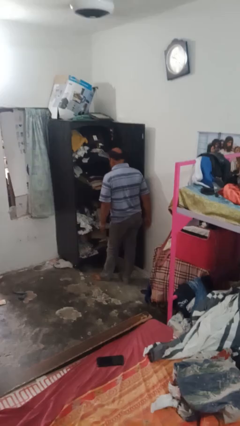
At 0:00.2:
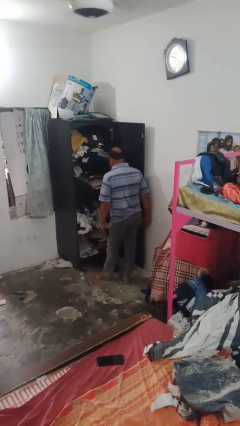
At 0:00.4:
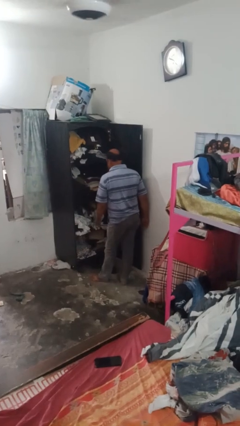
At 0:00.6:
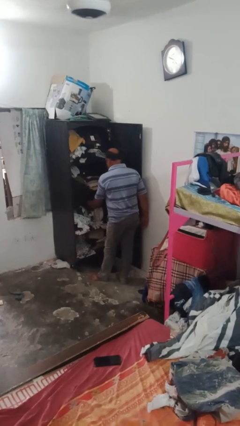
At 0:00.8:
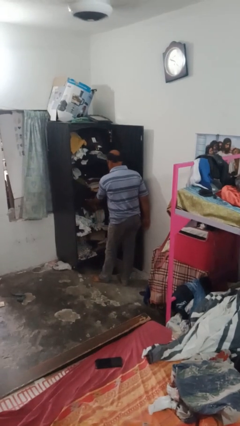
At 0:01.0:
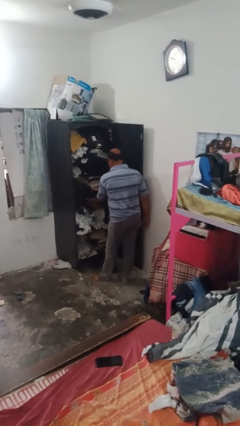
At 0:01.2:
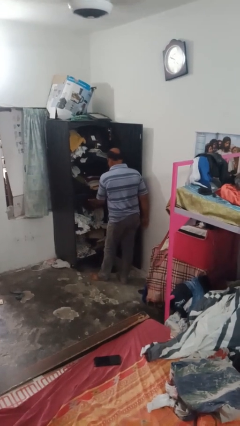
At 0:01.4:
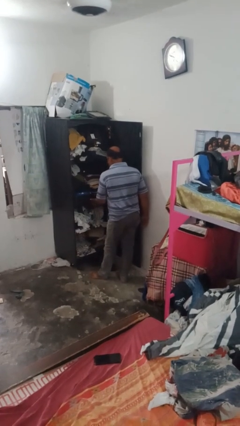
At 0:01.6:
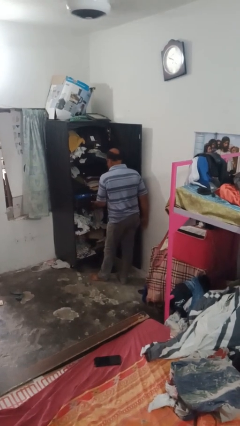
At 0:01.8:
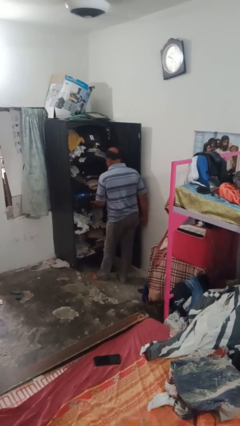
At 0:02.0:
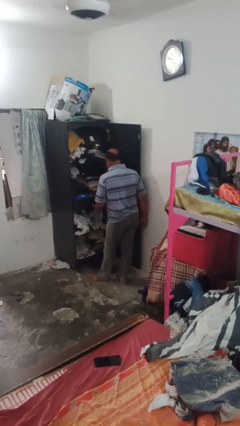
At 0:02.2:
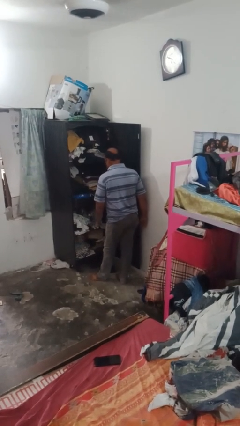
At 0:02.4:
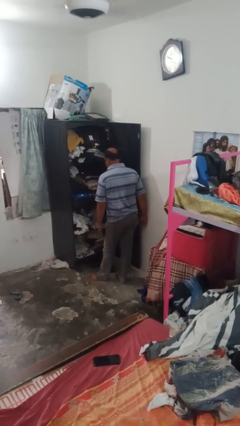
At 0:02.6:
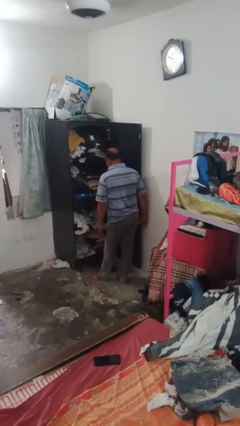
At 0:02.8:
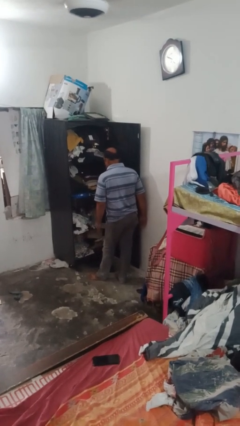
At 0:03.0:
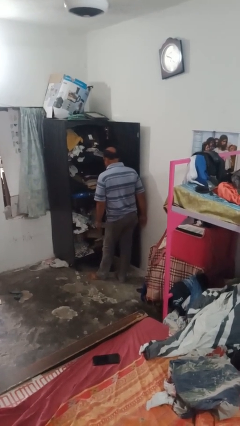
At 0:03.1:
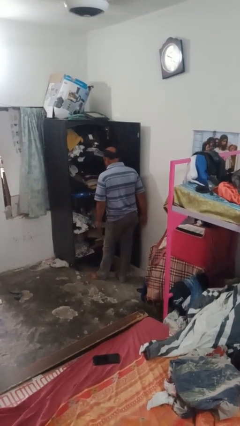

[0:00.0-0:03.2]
person opens dresser drawer

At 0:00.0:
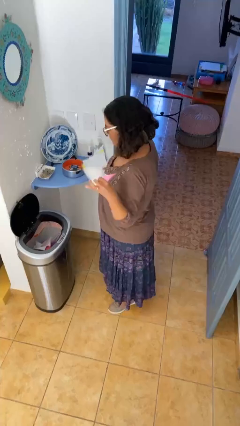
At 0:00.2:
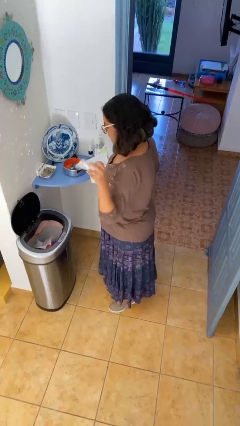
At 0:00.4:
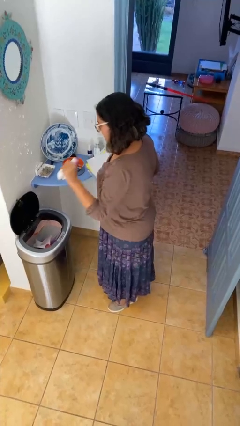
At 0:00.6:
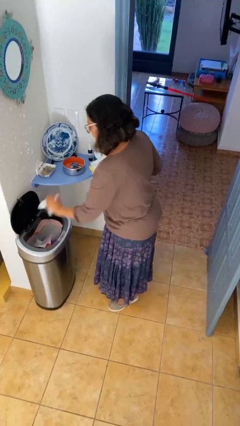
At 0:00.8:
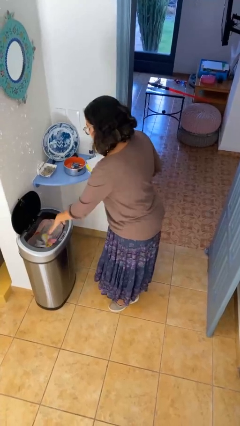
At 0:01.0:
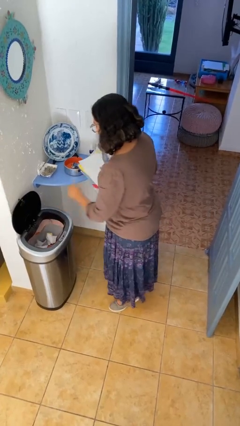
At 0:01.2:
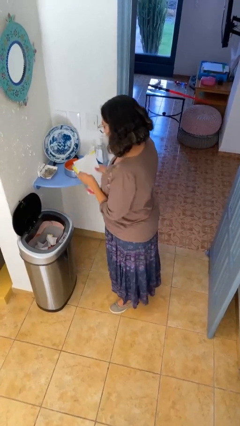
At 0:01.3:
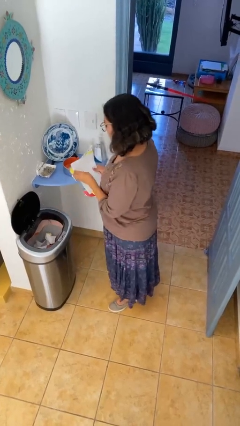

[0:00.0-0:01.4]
person discards trash

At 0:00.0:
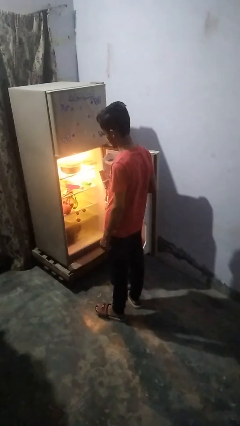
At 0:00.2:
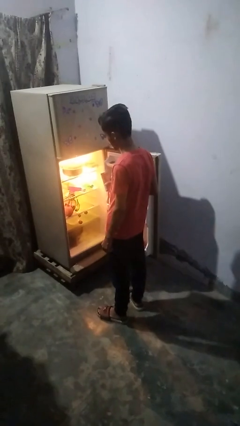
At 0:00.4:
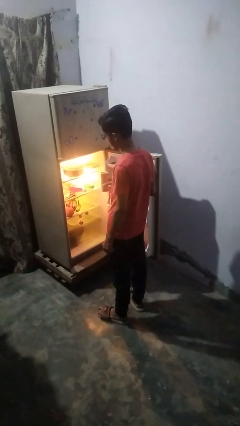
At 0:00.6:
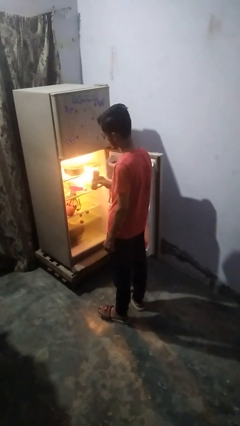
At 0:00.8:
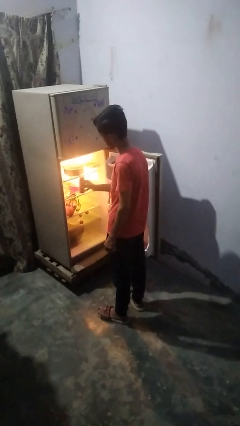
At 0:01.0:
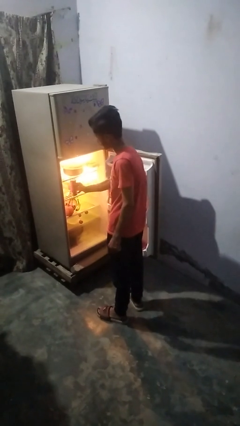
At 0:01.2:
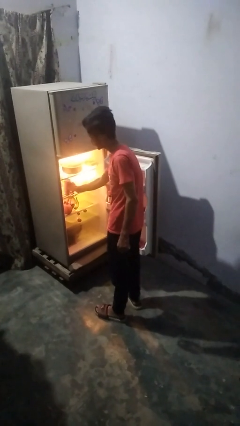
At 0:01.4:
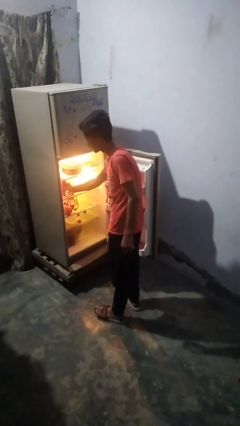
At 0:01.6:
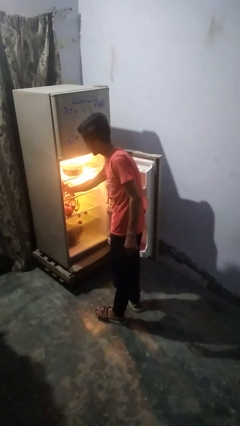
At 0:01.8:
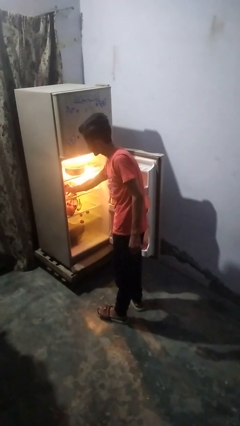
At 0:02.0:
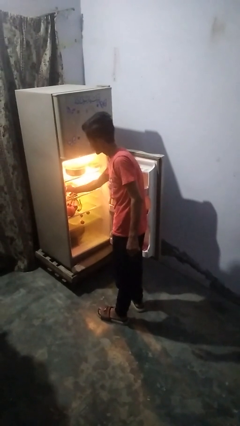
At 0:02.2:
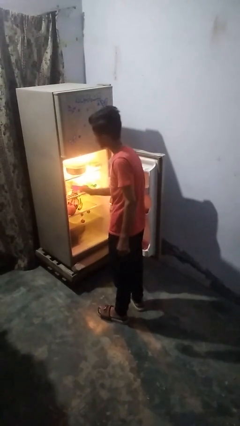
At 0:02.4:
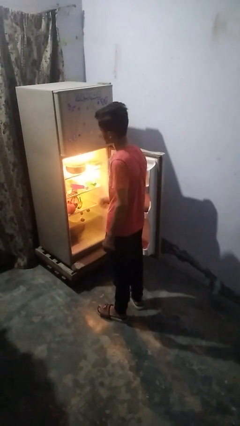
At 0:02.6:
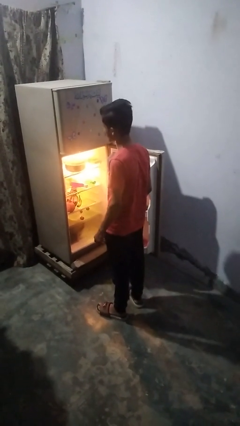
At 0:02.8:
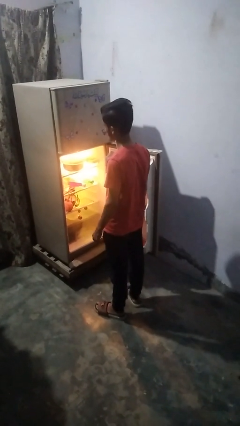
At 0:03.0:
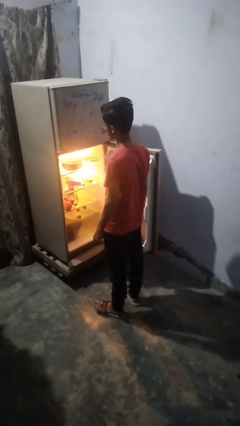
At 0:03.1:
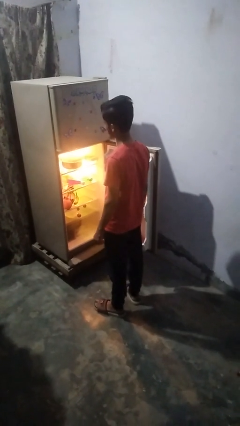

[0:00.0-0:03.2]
person takes object from refrigerator

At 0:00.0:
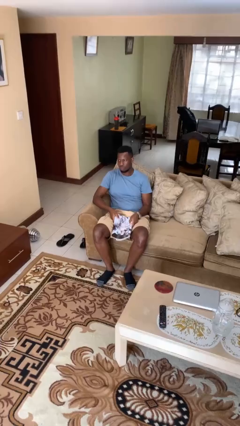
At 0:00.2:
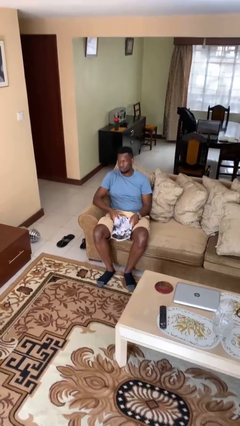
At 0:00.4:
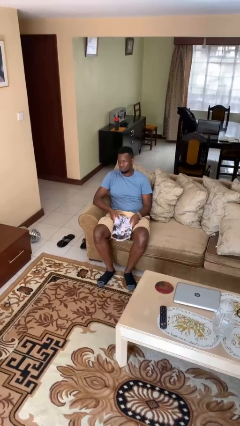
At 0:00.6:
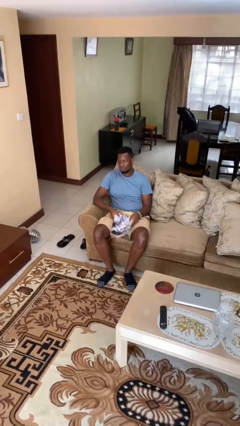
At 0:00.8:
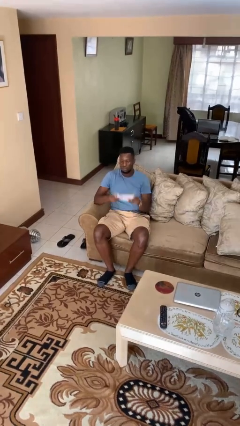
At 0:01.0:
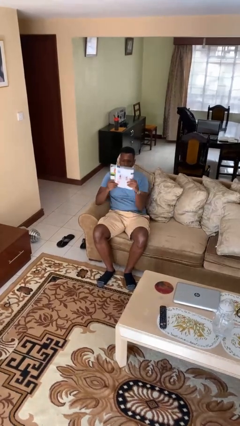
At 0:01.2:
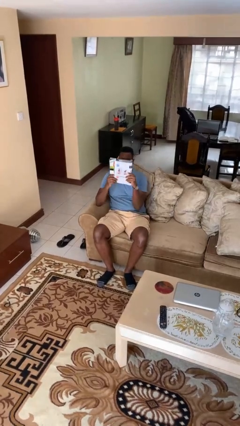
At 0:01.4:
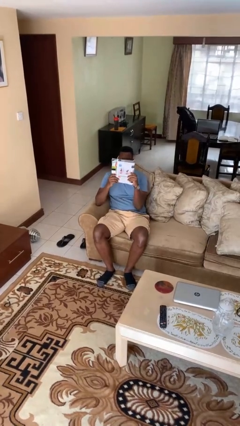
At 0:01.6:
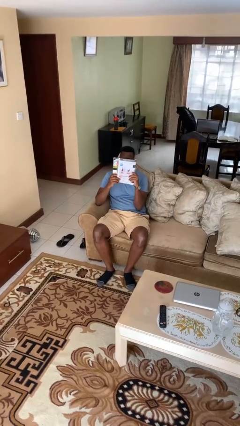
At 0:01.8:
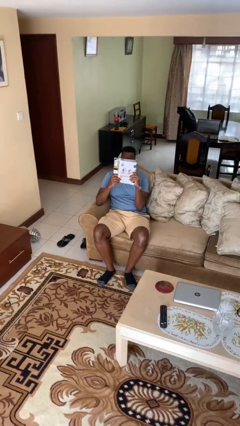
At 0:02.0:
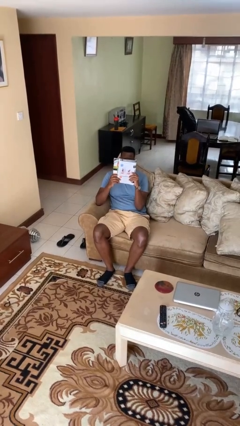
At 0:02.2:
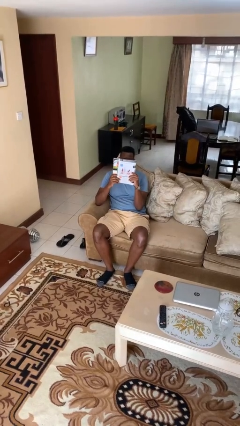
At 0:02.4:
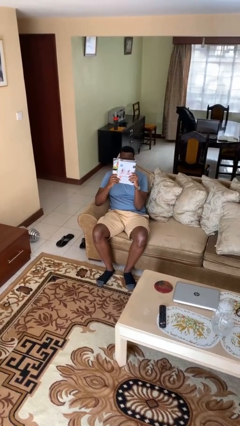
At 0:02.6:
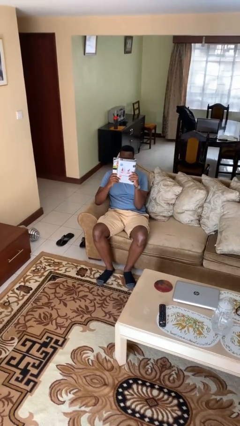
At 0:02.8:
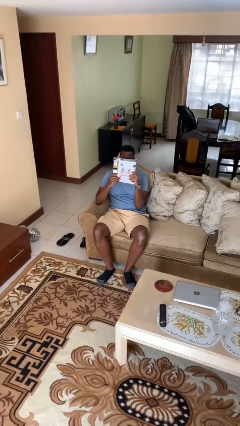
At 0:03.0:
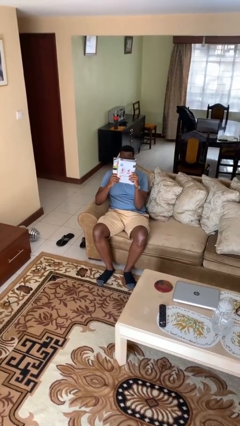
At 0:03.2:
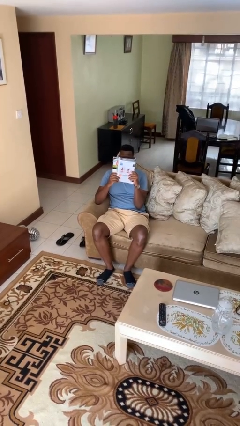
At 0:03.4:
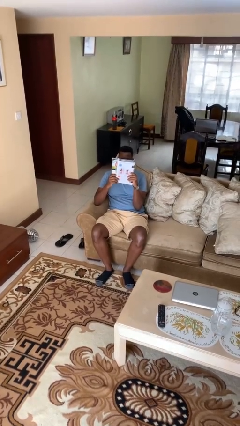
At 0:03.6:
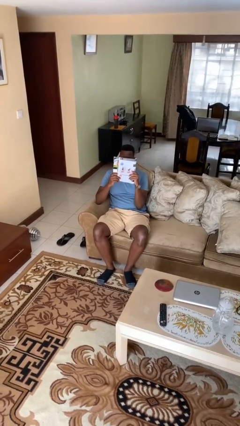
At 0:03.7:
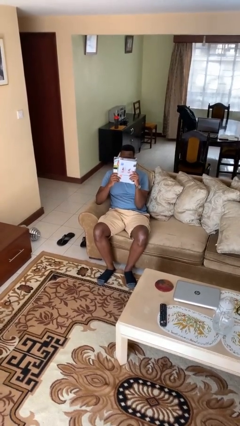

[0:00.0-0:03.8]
person reads document

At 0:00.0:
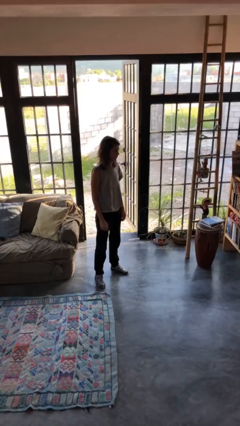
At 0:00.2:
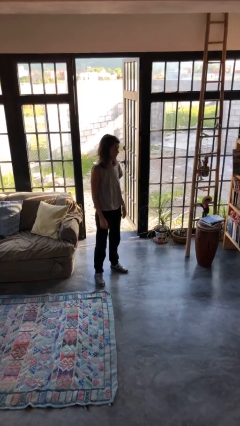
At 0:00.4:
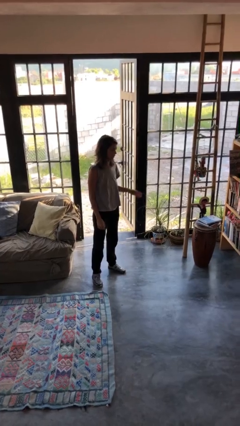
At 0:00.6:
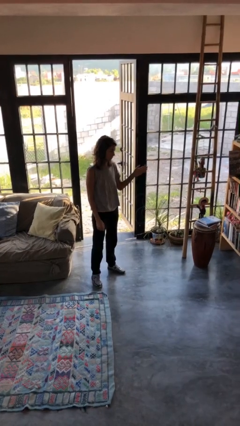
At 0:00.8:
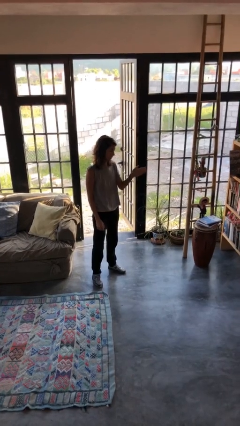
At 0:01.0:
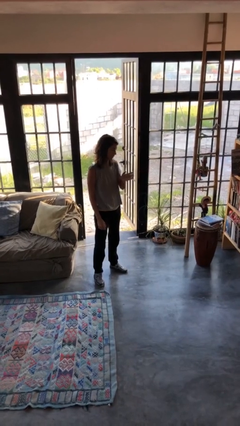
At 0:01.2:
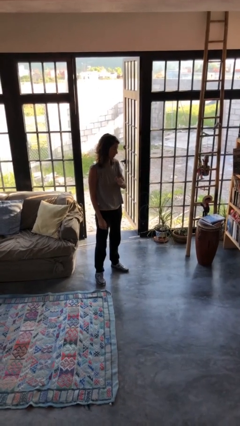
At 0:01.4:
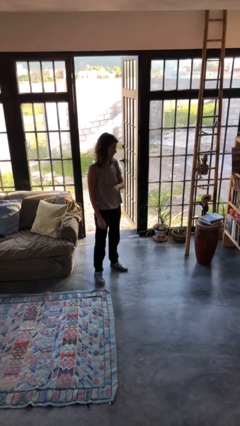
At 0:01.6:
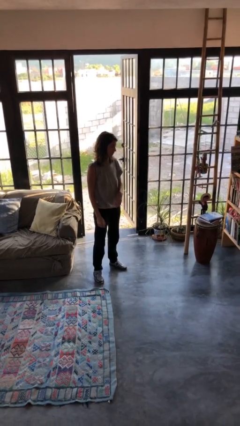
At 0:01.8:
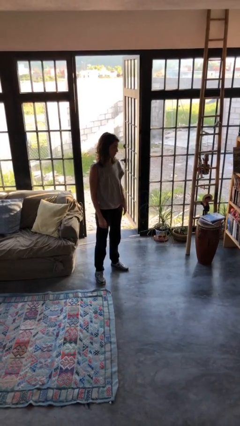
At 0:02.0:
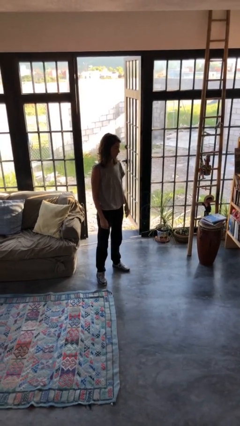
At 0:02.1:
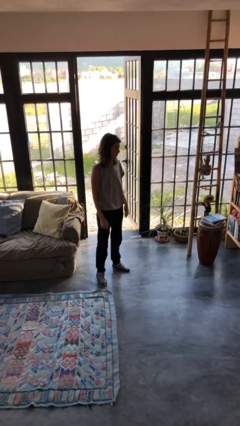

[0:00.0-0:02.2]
person gestures swipe right

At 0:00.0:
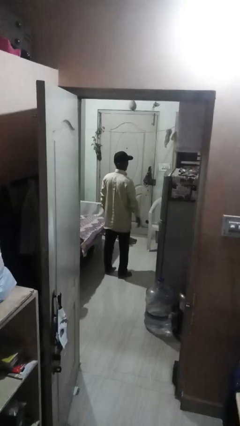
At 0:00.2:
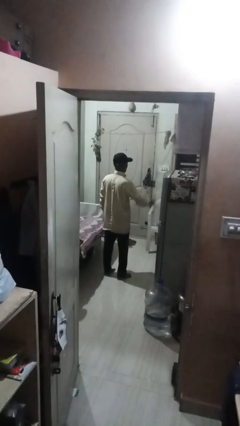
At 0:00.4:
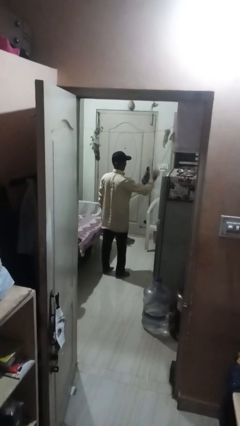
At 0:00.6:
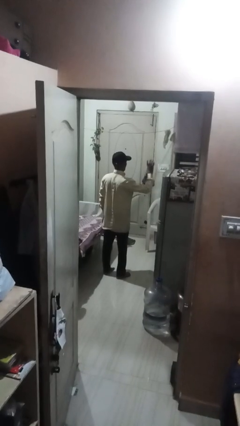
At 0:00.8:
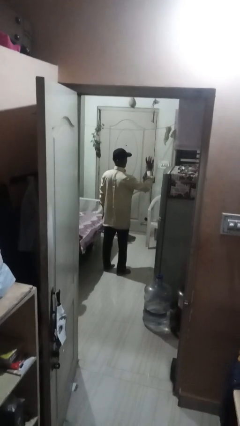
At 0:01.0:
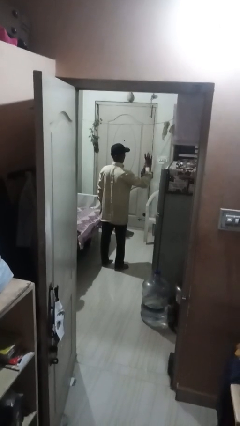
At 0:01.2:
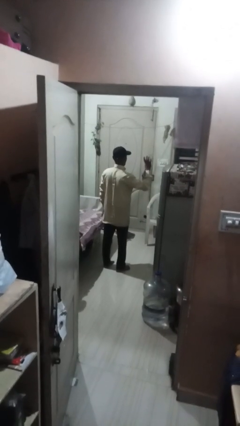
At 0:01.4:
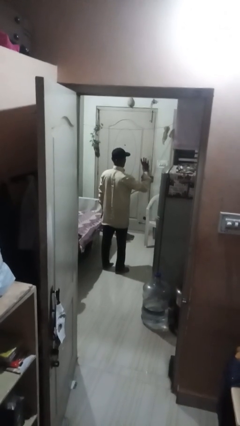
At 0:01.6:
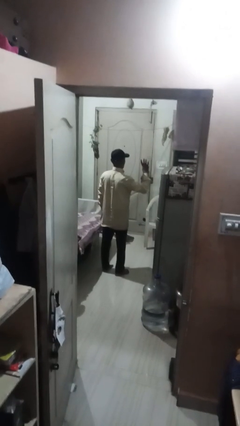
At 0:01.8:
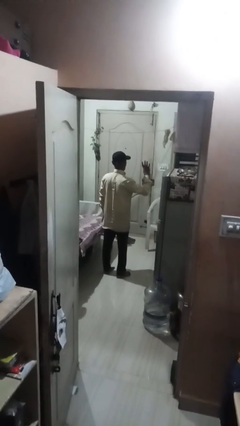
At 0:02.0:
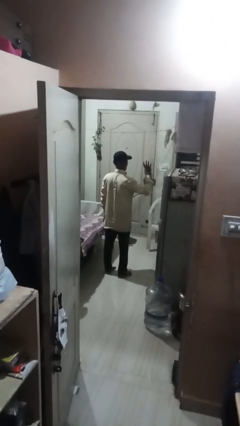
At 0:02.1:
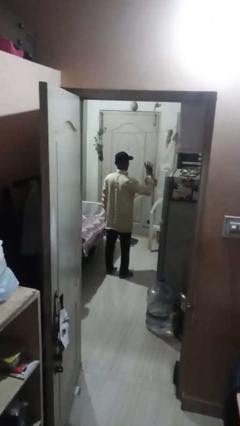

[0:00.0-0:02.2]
person gestures number four

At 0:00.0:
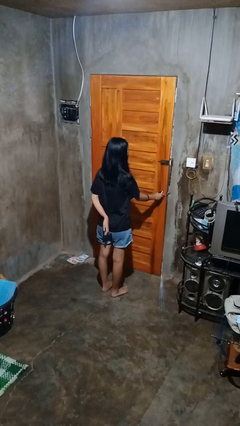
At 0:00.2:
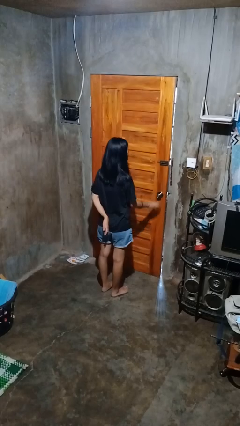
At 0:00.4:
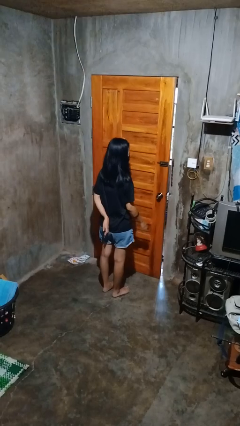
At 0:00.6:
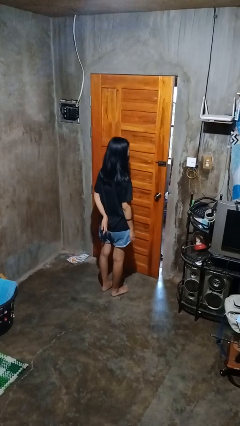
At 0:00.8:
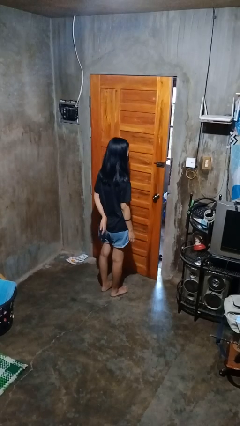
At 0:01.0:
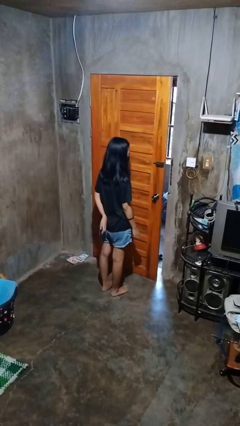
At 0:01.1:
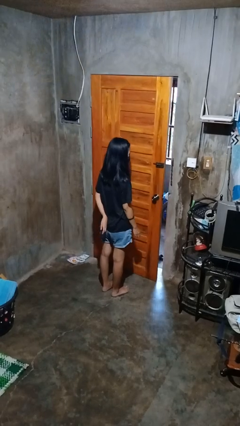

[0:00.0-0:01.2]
person opens facility door
